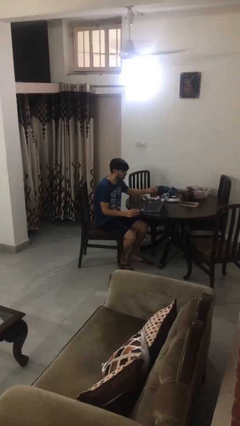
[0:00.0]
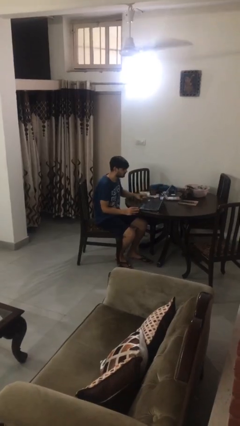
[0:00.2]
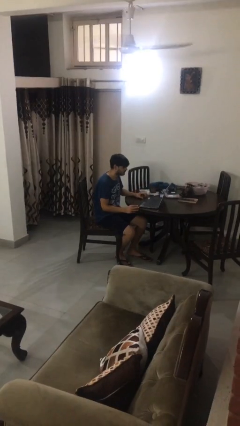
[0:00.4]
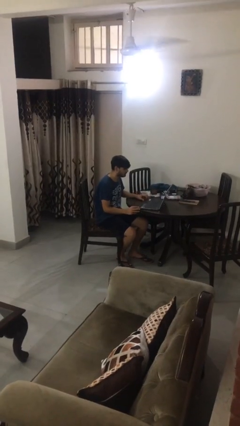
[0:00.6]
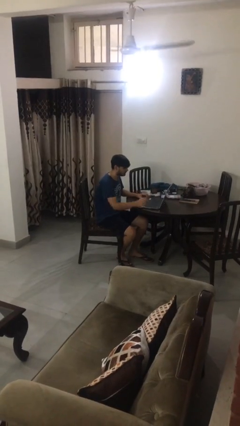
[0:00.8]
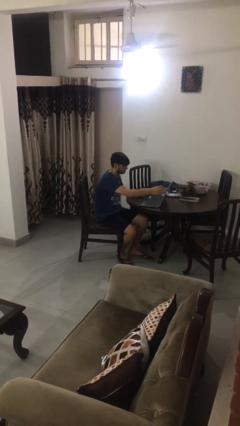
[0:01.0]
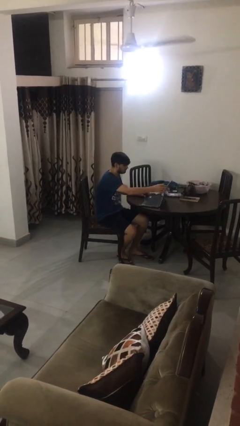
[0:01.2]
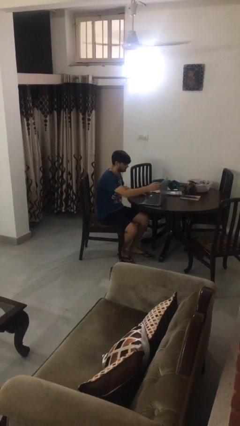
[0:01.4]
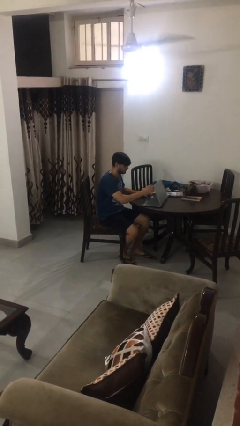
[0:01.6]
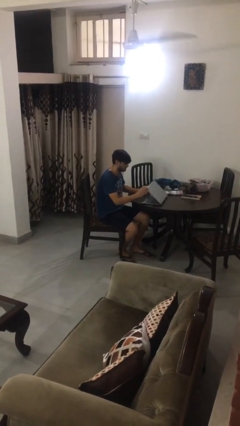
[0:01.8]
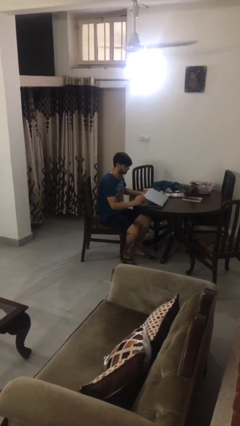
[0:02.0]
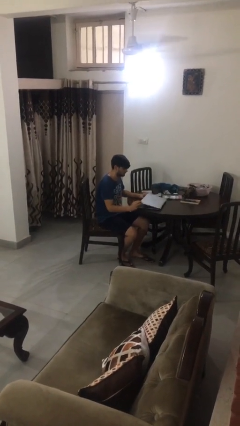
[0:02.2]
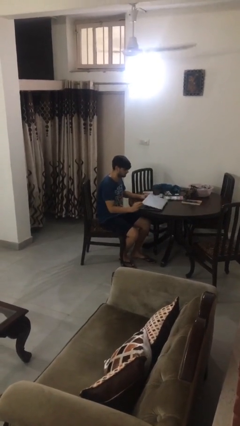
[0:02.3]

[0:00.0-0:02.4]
person closes laptop

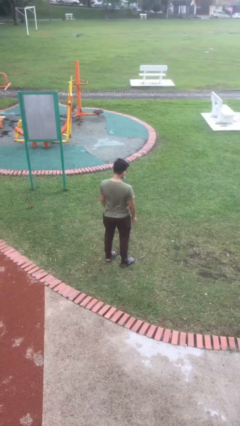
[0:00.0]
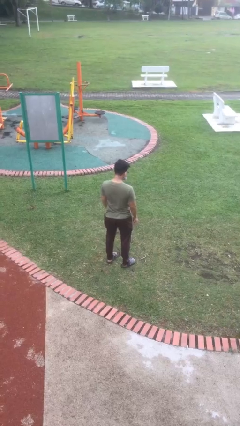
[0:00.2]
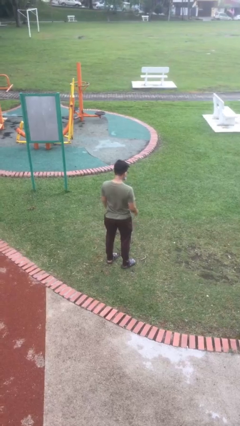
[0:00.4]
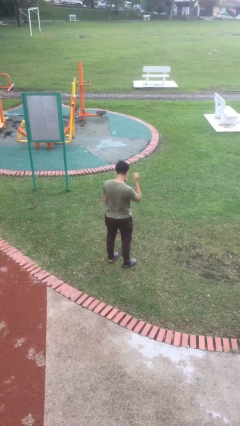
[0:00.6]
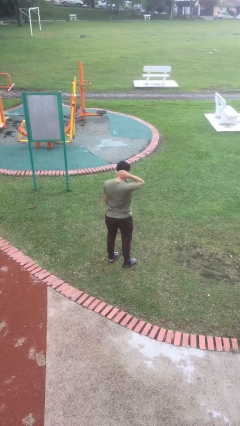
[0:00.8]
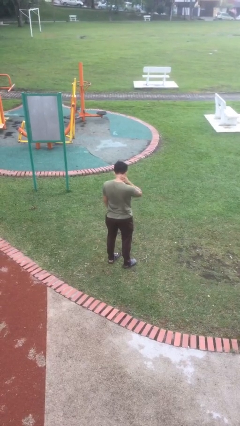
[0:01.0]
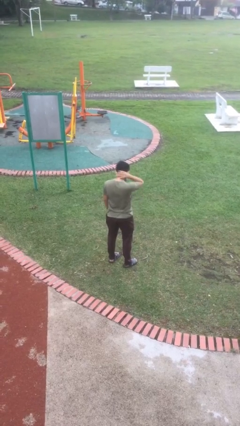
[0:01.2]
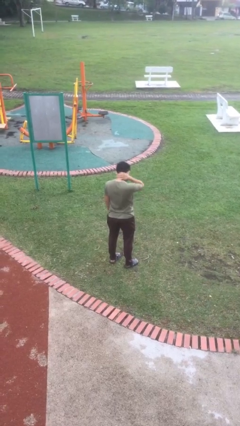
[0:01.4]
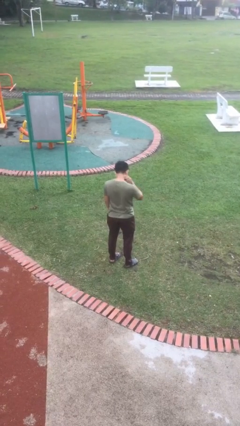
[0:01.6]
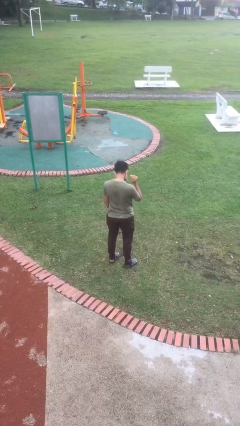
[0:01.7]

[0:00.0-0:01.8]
person rubs neck

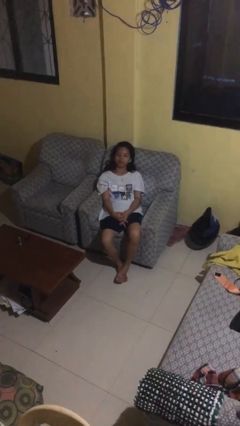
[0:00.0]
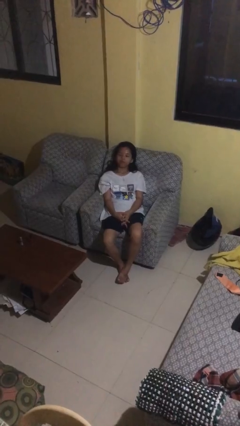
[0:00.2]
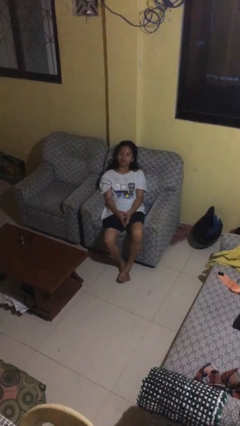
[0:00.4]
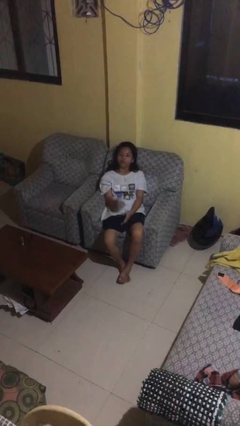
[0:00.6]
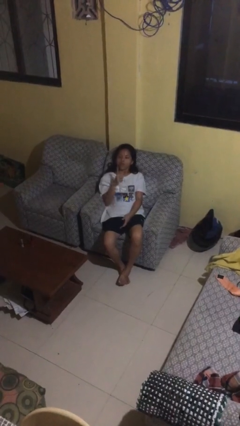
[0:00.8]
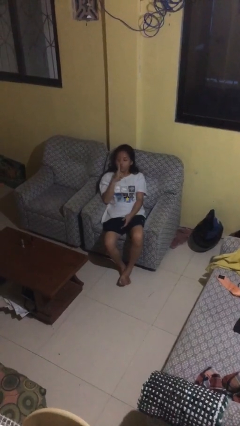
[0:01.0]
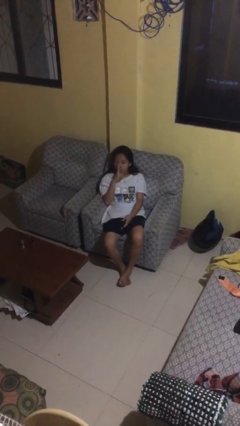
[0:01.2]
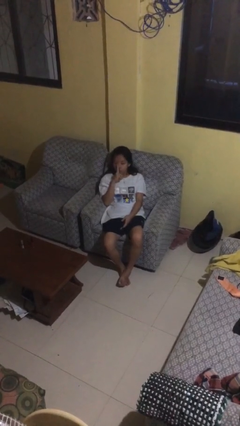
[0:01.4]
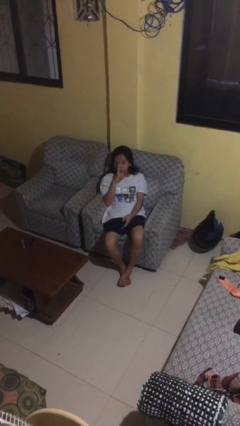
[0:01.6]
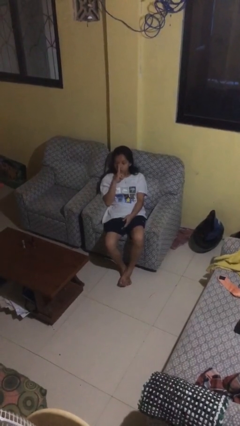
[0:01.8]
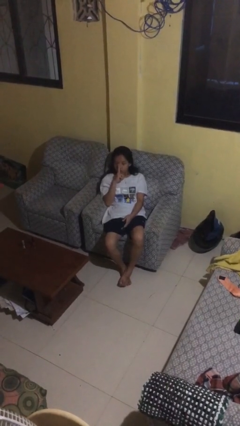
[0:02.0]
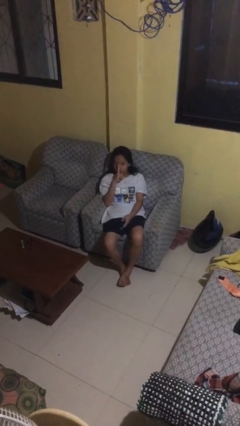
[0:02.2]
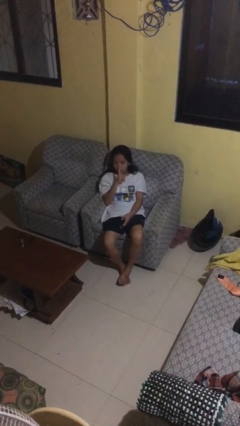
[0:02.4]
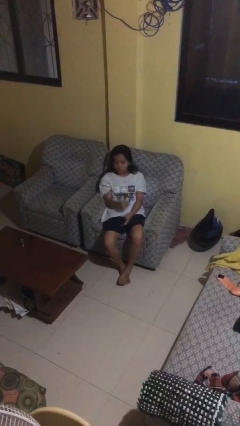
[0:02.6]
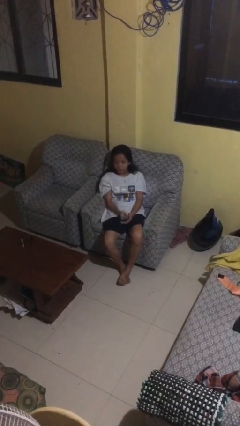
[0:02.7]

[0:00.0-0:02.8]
person gestures be quiet

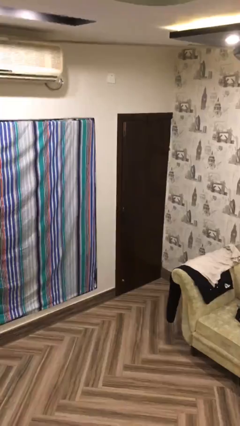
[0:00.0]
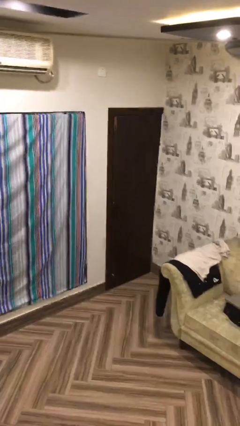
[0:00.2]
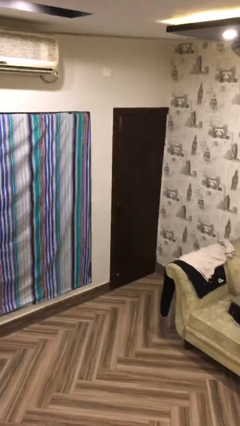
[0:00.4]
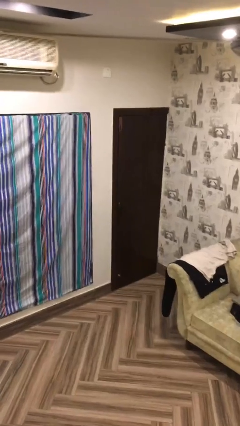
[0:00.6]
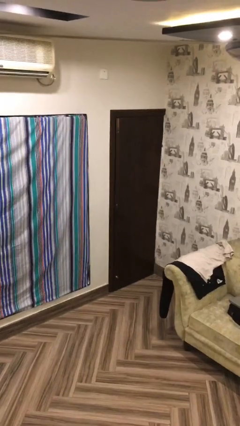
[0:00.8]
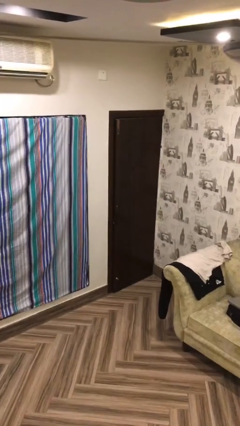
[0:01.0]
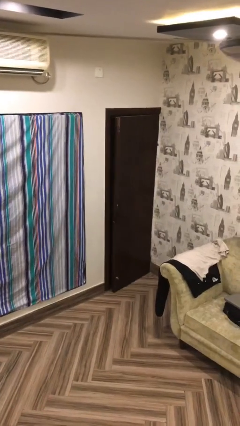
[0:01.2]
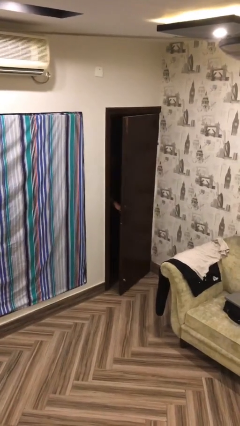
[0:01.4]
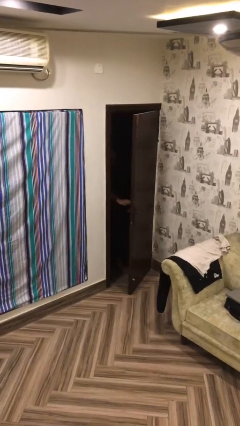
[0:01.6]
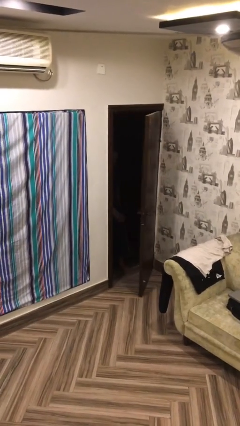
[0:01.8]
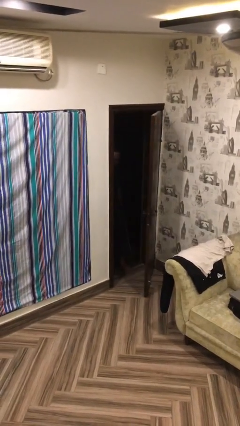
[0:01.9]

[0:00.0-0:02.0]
person opens facility door

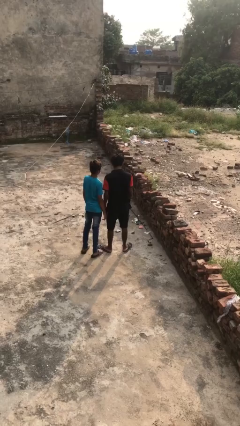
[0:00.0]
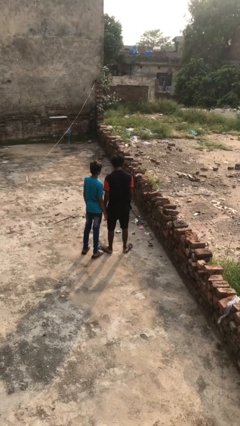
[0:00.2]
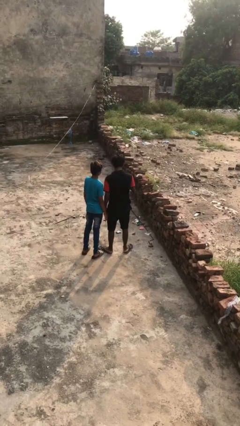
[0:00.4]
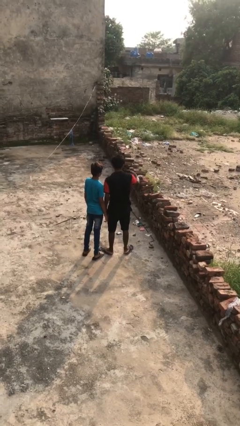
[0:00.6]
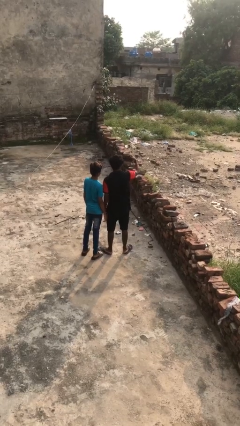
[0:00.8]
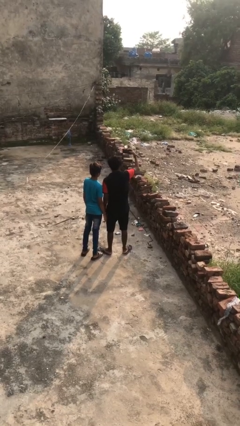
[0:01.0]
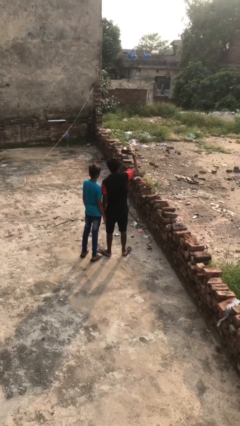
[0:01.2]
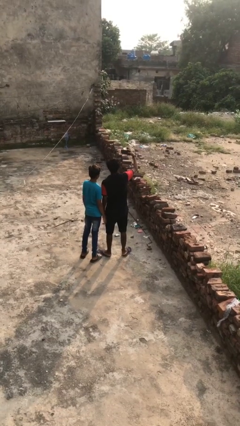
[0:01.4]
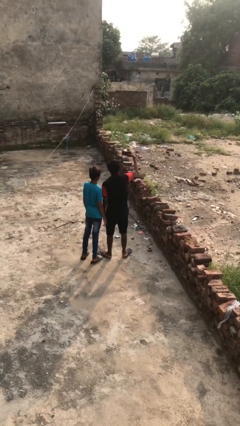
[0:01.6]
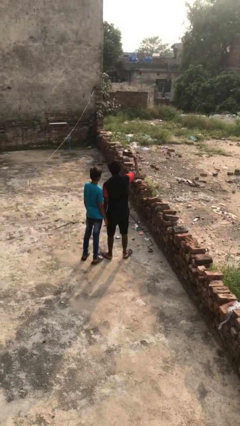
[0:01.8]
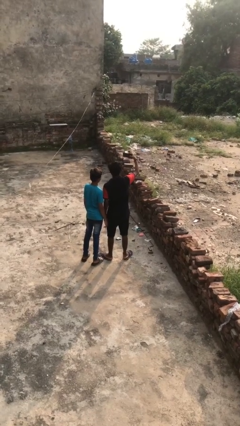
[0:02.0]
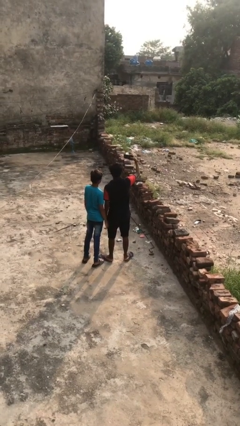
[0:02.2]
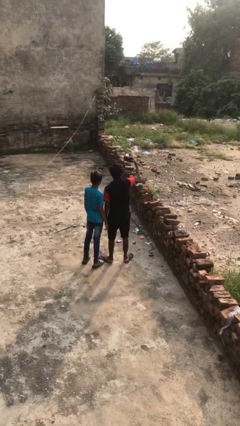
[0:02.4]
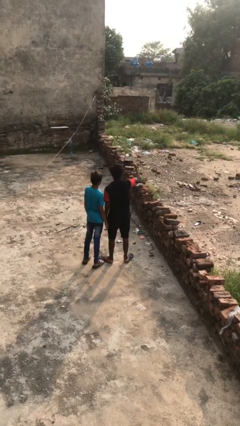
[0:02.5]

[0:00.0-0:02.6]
person takes selfie with person

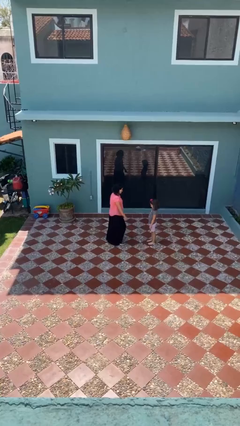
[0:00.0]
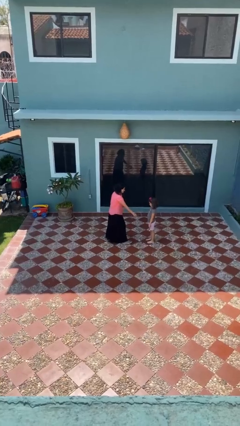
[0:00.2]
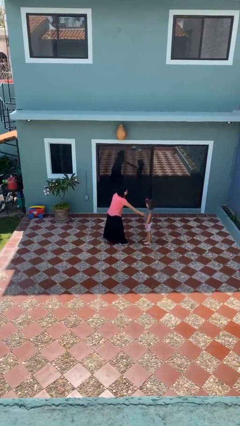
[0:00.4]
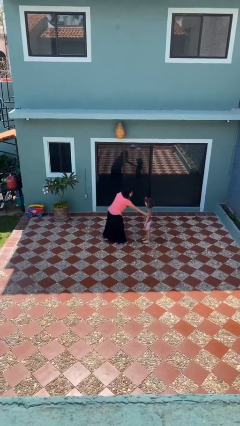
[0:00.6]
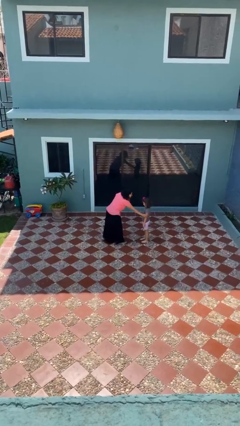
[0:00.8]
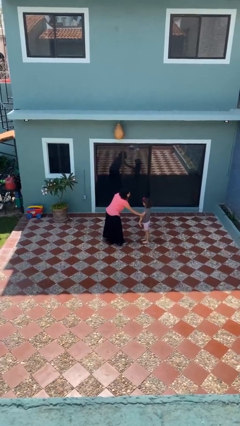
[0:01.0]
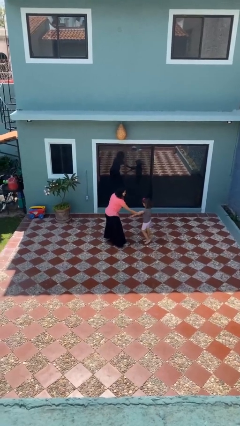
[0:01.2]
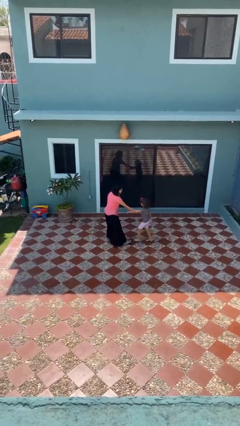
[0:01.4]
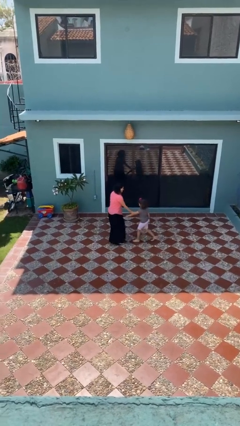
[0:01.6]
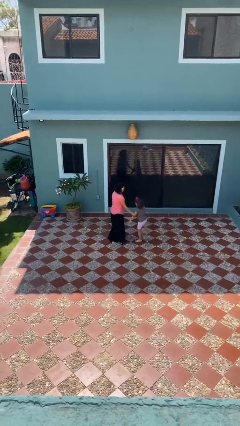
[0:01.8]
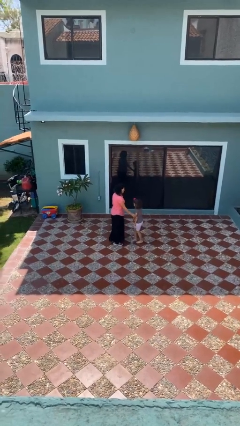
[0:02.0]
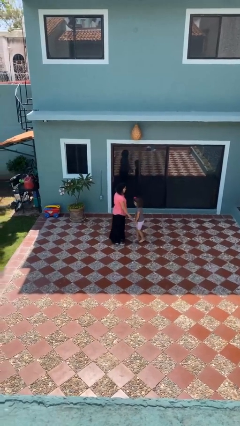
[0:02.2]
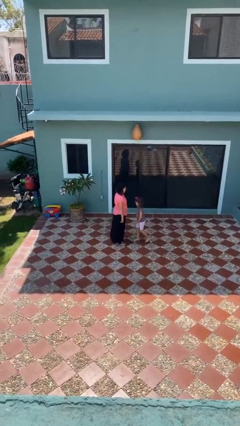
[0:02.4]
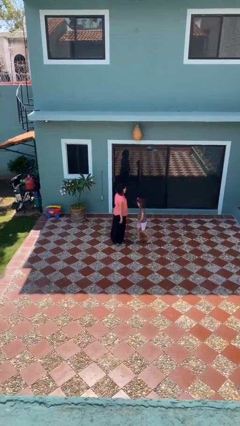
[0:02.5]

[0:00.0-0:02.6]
person grabs person by bicep

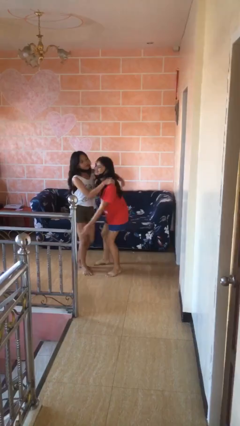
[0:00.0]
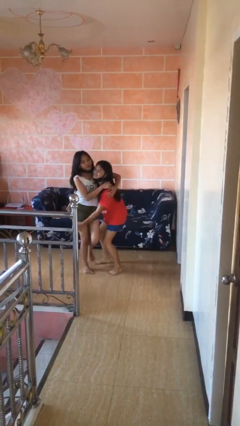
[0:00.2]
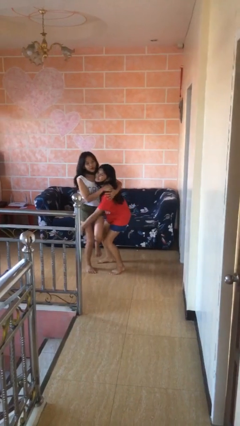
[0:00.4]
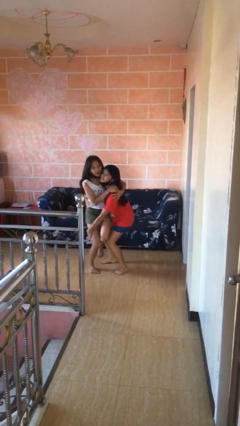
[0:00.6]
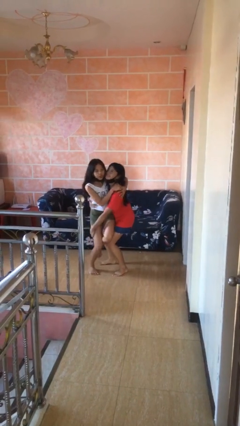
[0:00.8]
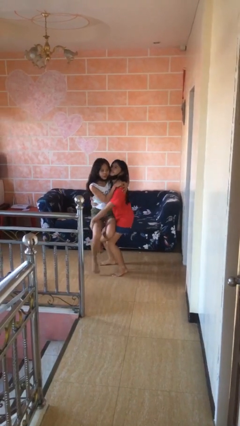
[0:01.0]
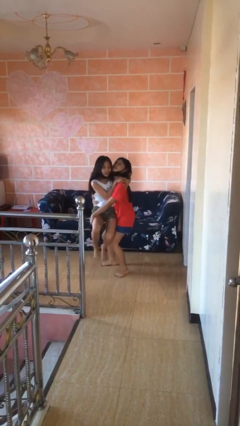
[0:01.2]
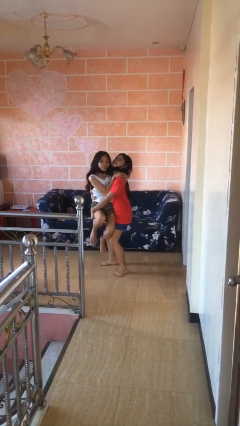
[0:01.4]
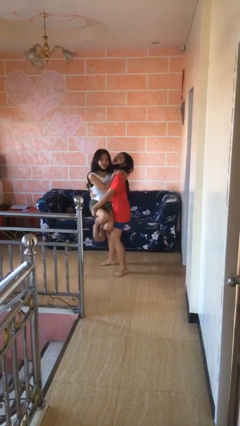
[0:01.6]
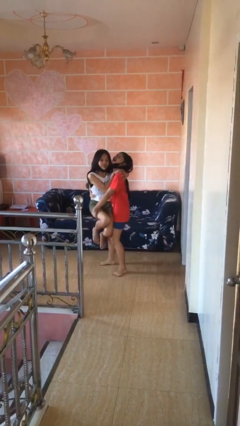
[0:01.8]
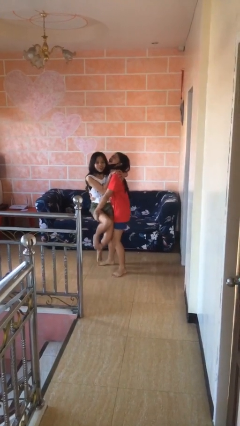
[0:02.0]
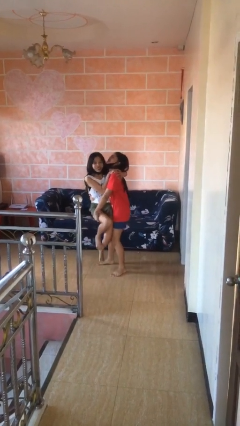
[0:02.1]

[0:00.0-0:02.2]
person picks up person

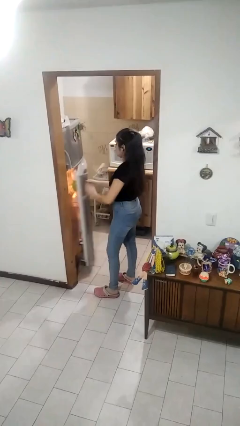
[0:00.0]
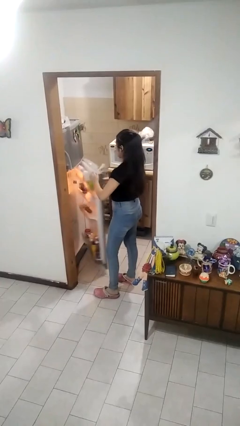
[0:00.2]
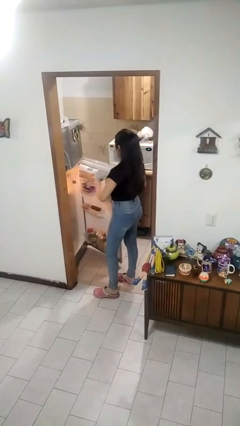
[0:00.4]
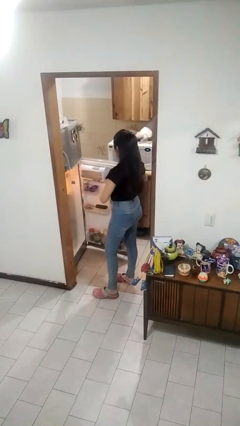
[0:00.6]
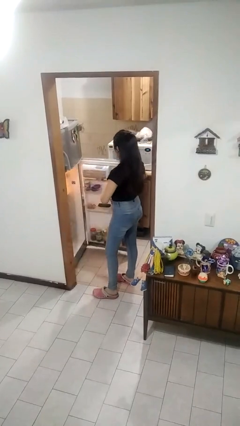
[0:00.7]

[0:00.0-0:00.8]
person opens refrigerator
